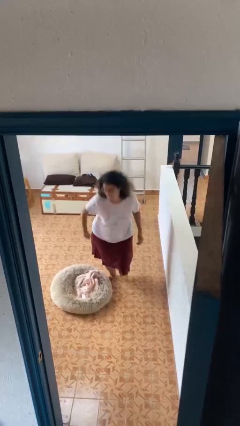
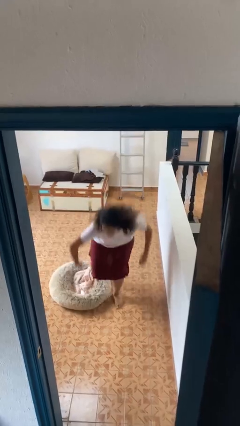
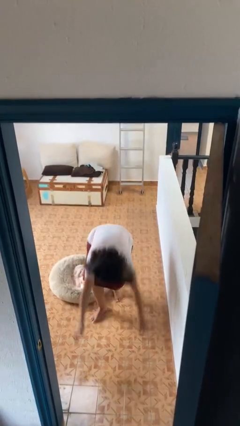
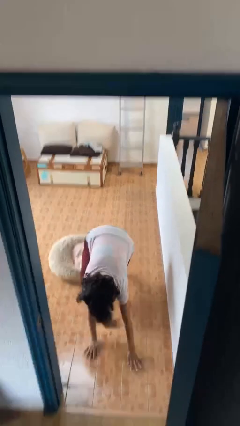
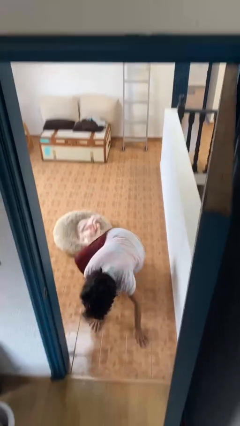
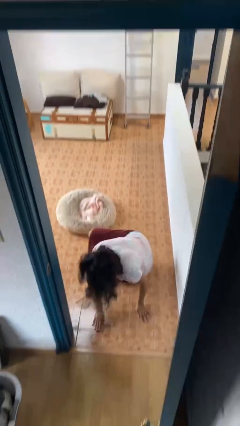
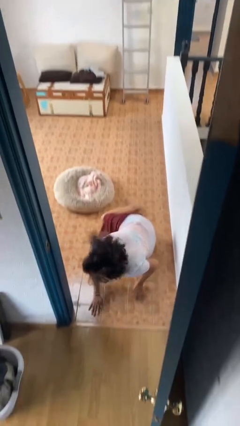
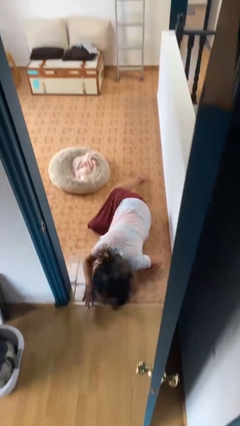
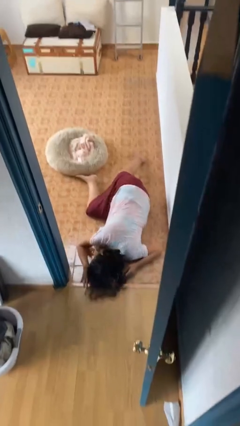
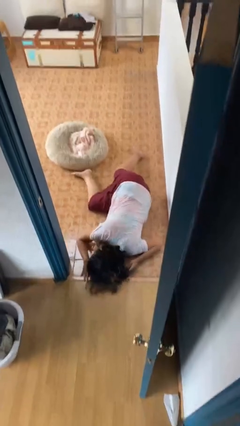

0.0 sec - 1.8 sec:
person trips on object on floor

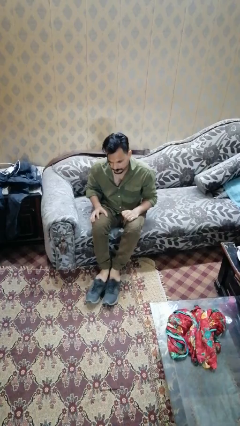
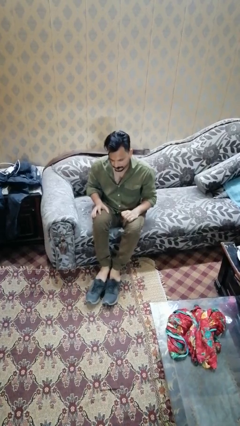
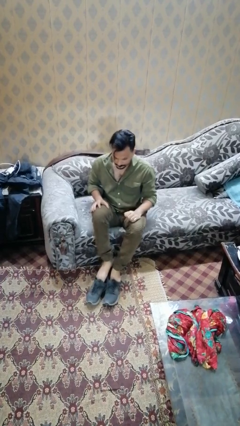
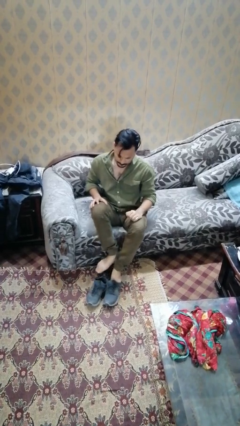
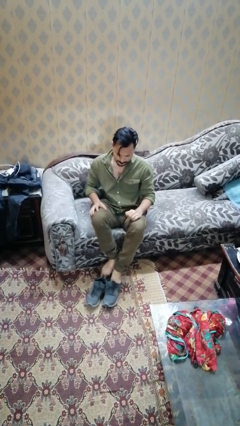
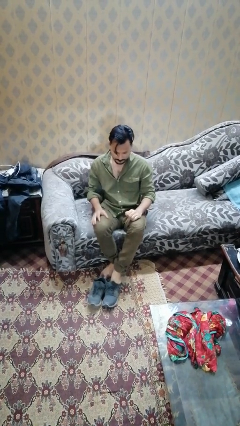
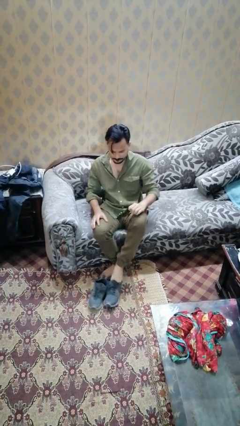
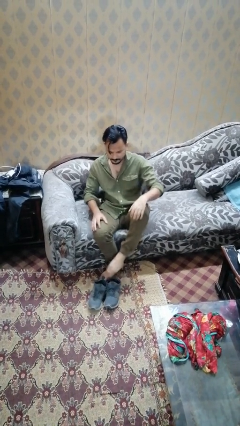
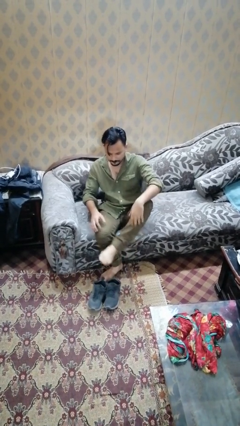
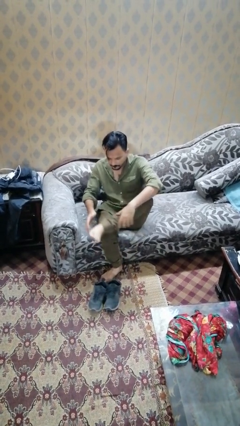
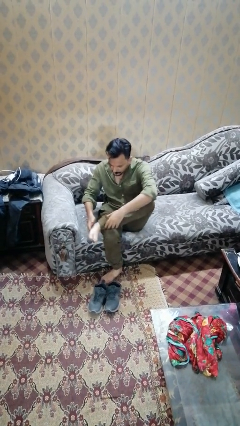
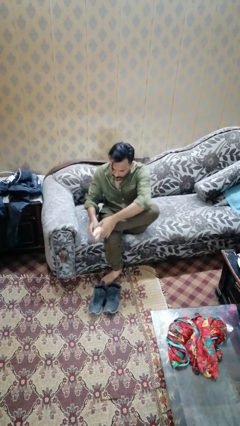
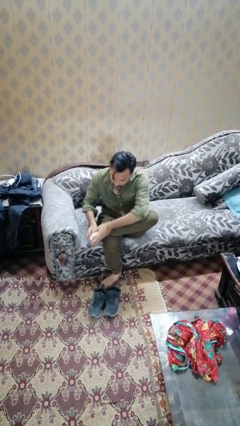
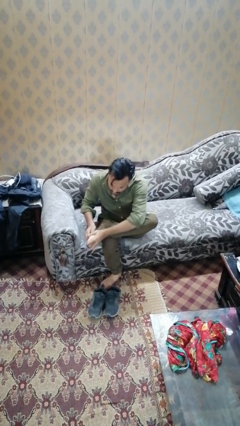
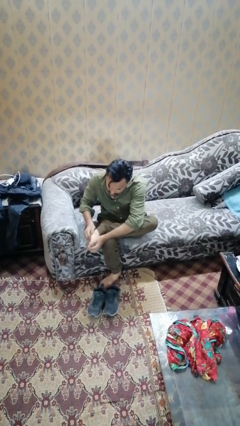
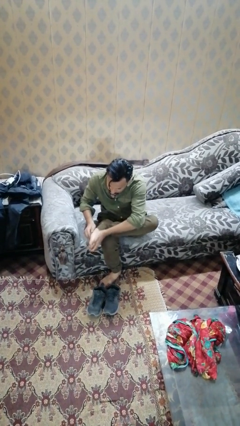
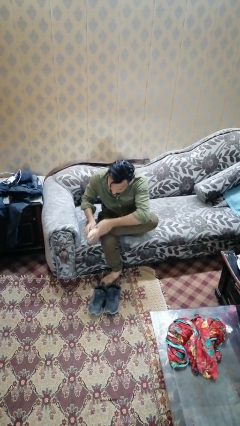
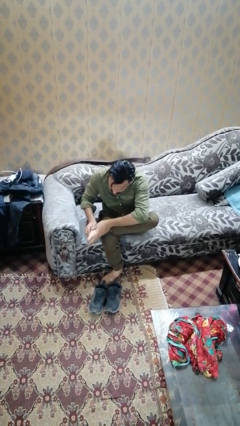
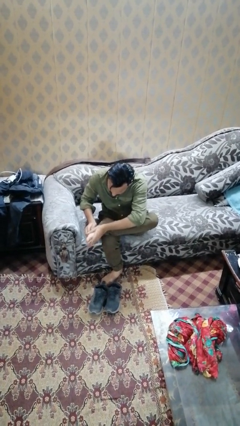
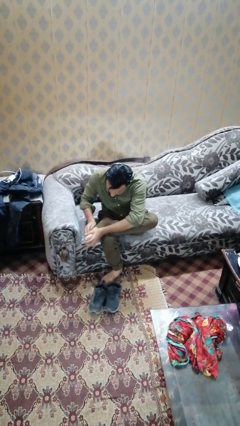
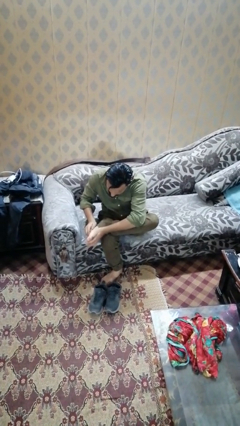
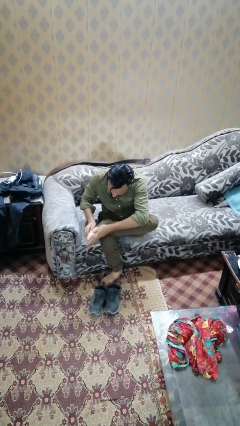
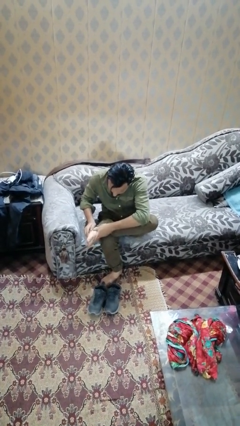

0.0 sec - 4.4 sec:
person rubs foot

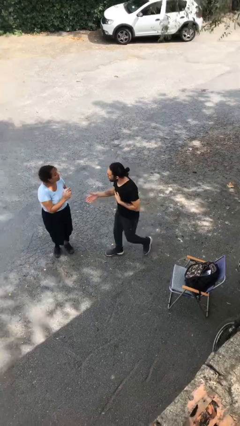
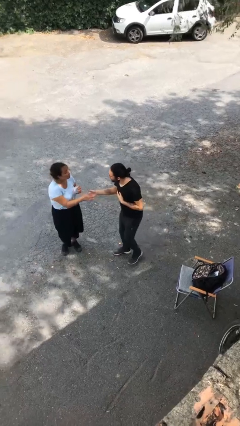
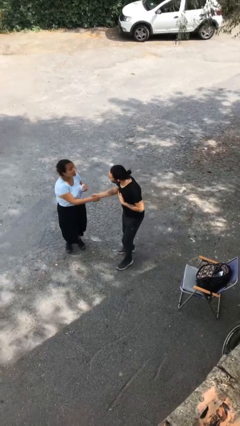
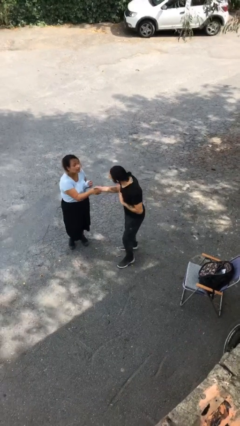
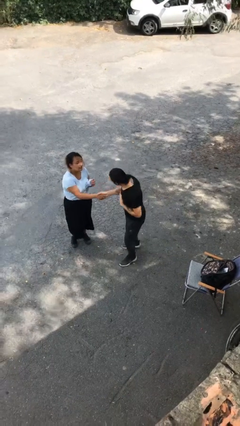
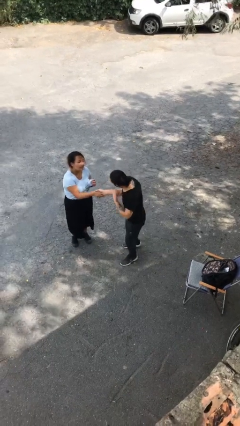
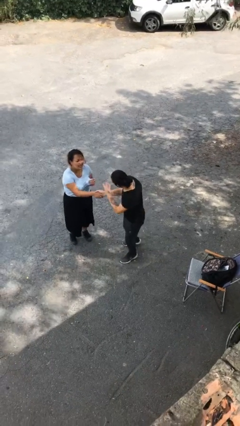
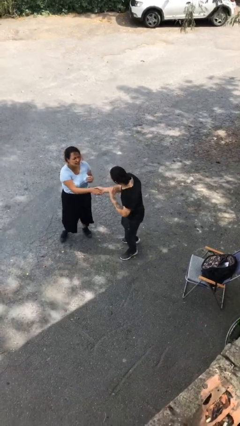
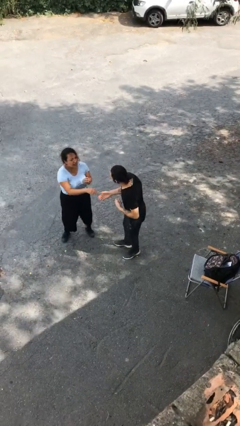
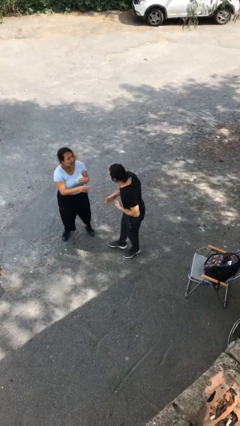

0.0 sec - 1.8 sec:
person shakes hand

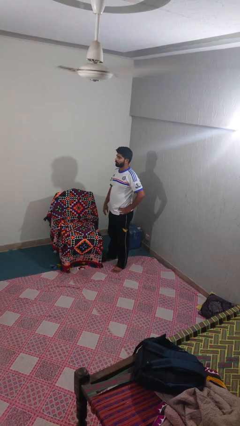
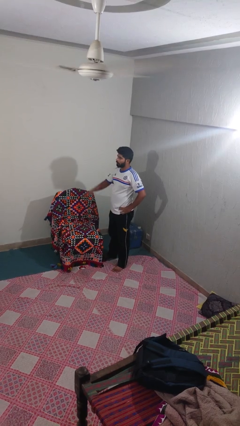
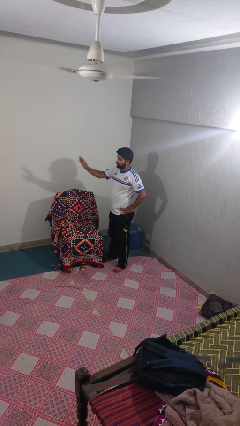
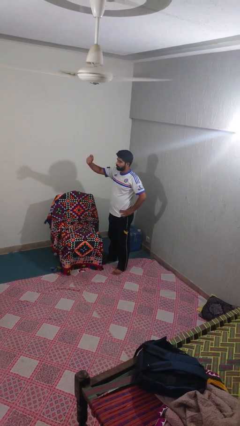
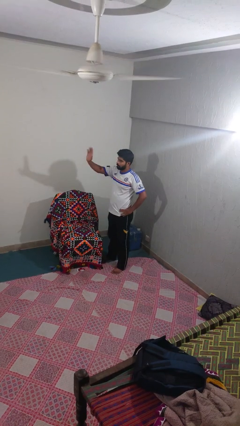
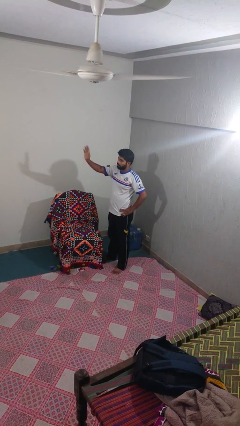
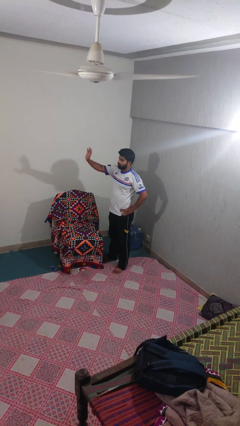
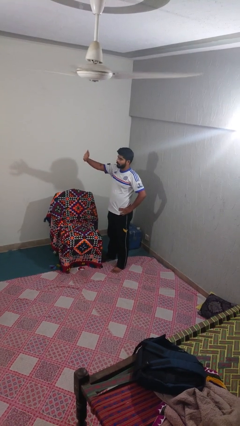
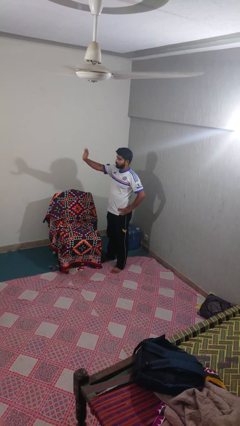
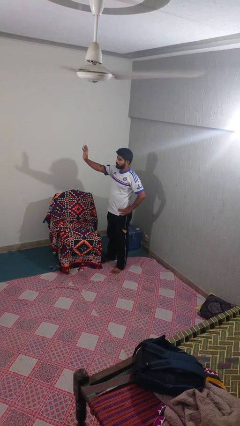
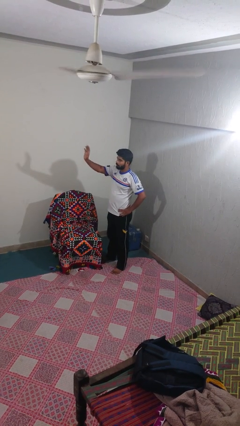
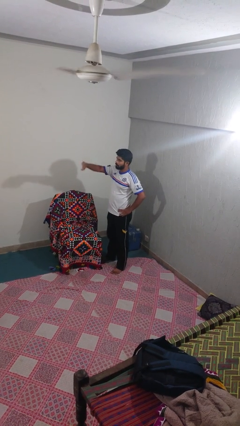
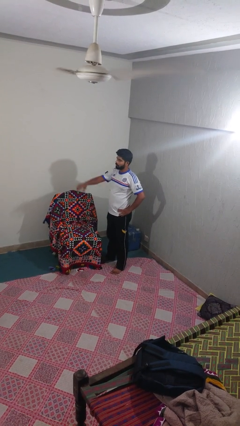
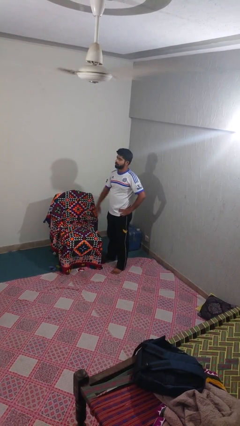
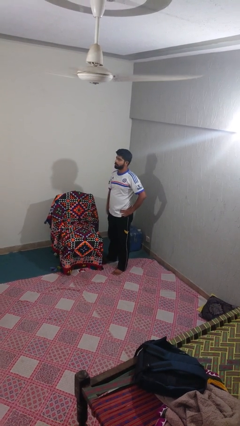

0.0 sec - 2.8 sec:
person waves at person

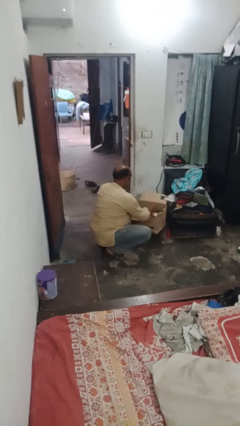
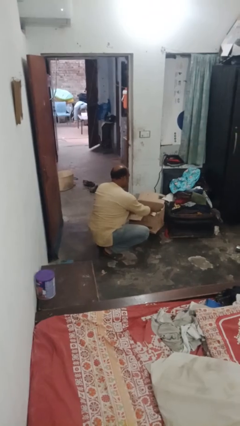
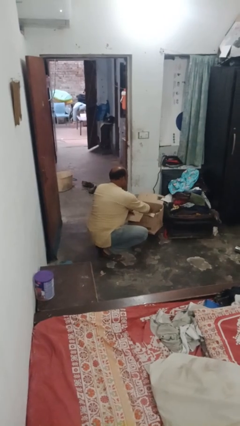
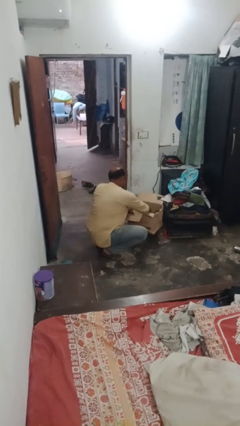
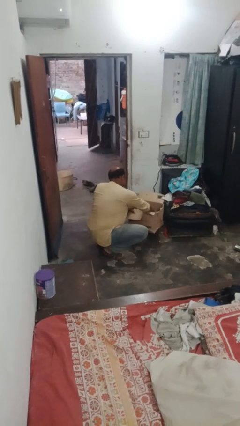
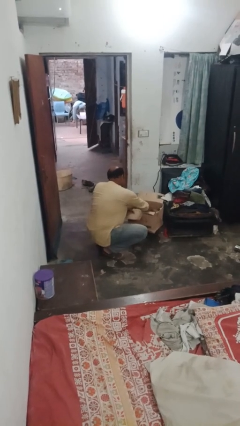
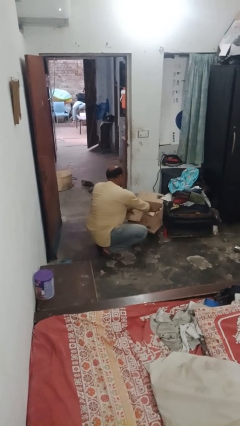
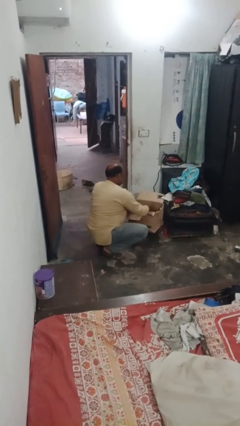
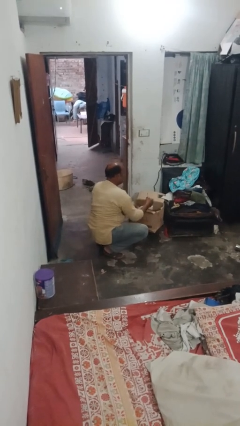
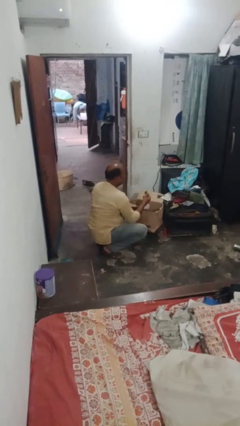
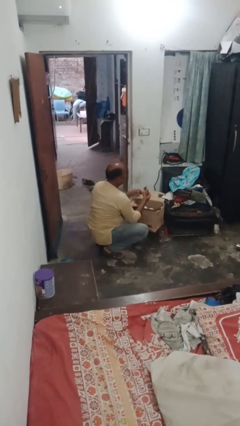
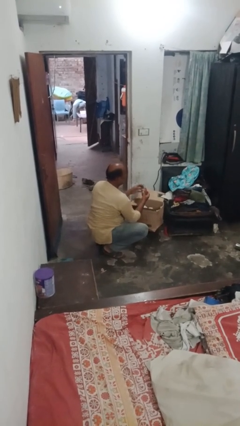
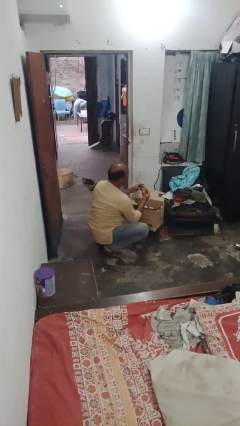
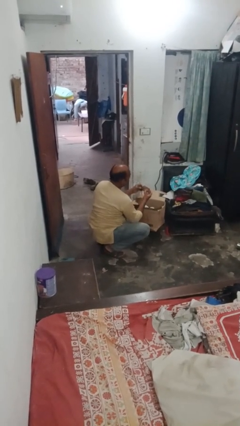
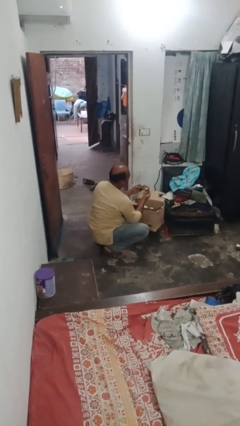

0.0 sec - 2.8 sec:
person takes object from box

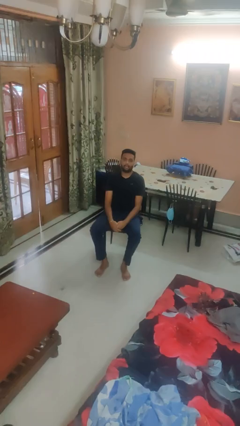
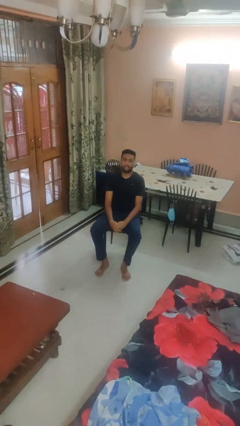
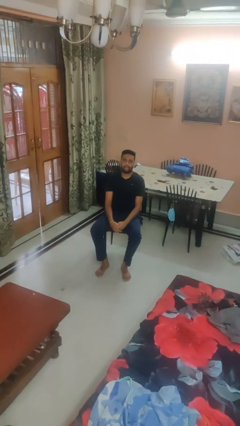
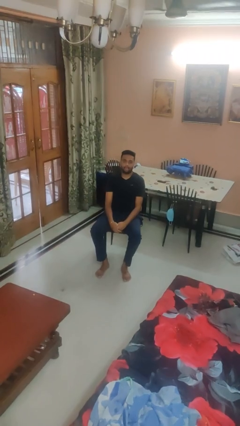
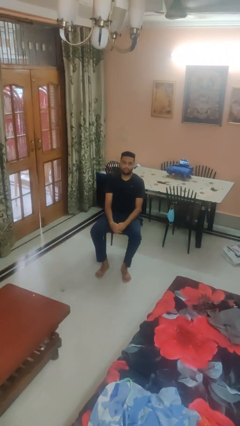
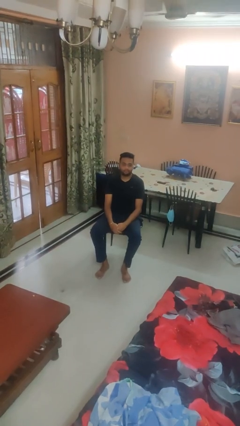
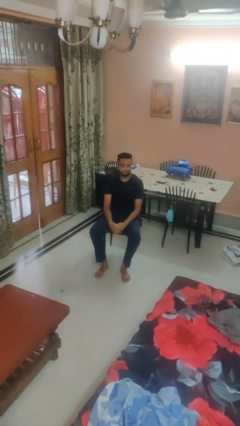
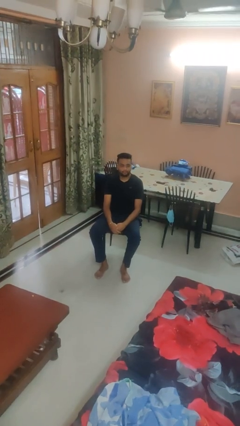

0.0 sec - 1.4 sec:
person sticks out tongue

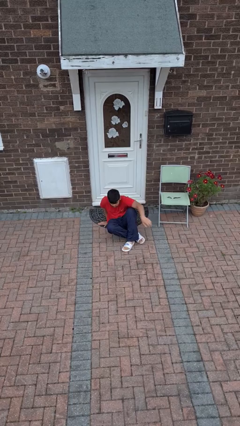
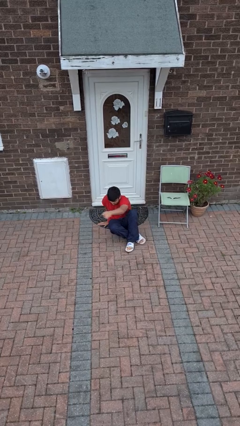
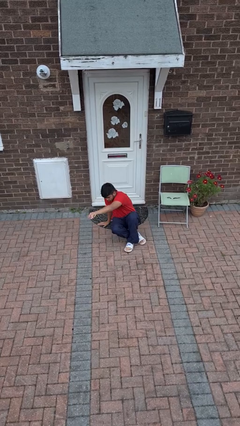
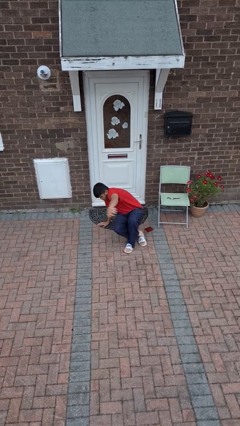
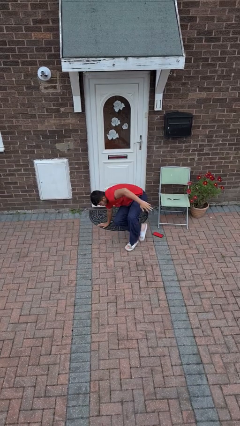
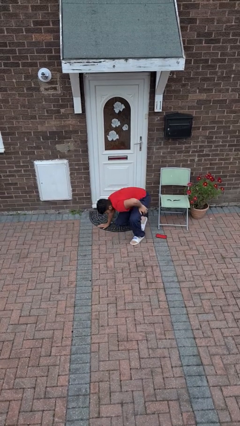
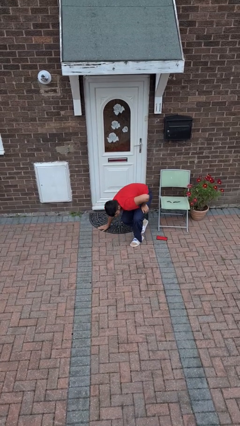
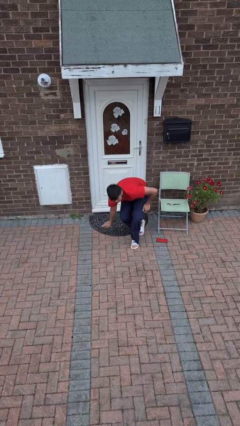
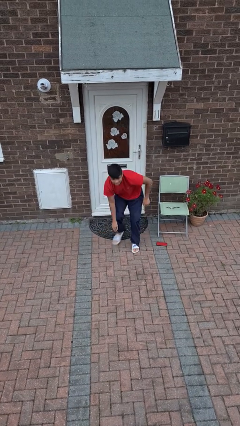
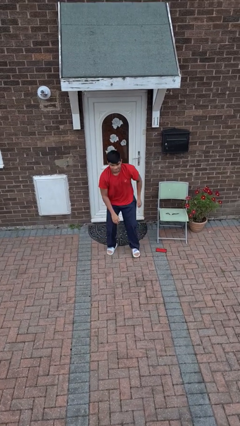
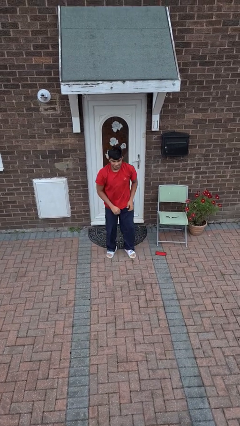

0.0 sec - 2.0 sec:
person stands up from floor
